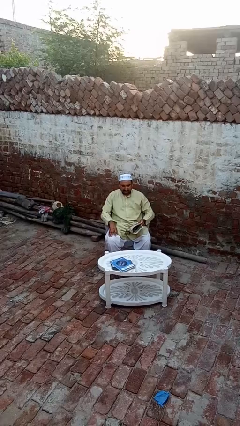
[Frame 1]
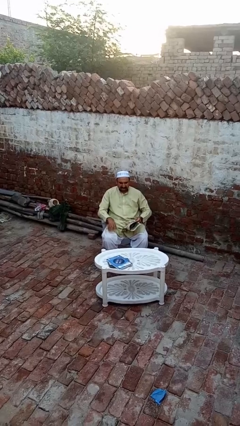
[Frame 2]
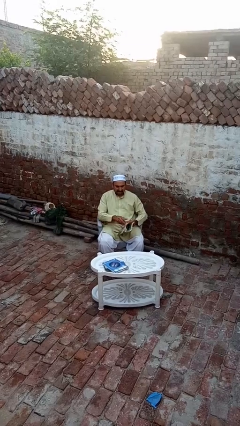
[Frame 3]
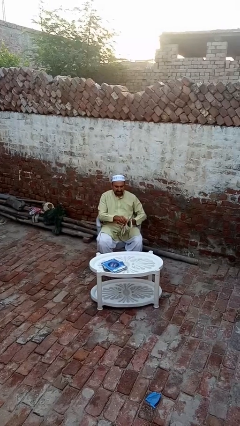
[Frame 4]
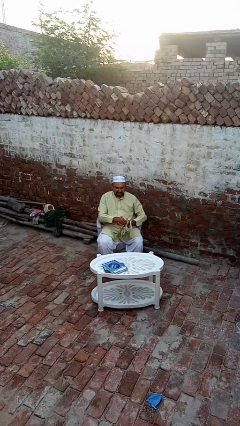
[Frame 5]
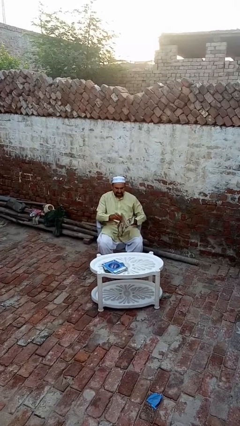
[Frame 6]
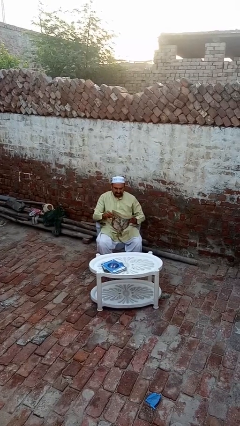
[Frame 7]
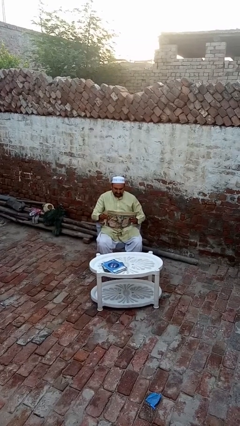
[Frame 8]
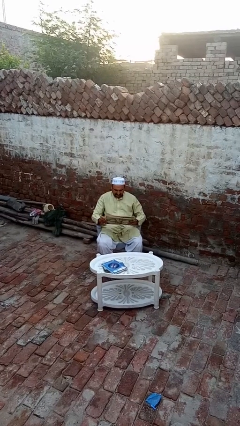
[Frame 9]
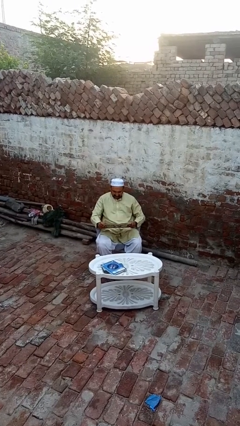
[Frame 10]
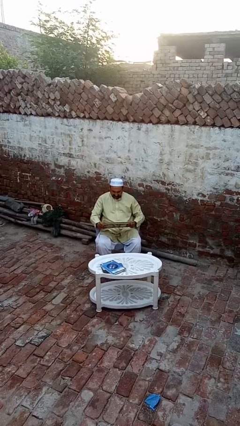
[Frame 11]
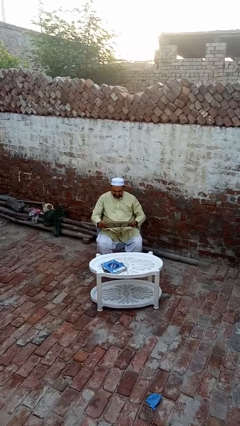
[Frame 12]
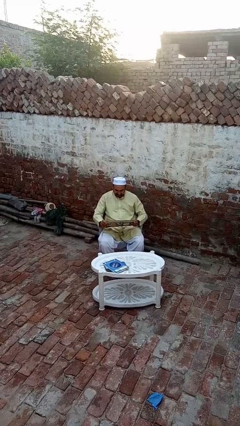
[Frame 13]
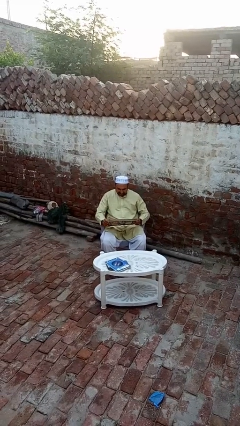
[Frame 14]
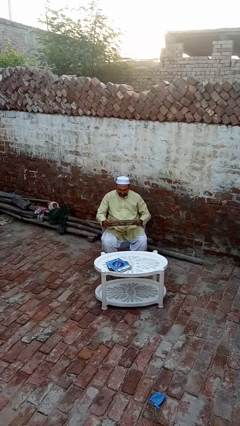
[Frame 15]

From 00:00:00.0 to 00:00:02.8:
person reads magazine

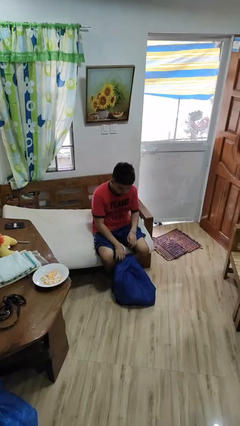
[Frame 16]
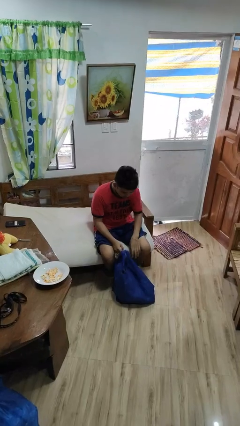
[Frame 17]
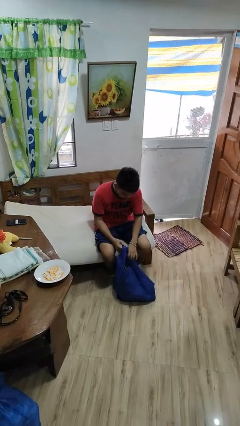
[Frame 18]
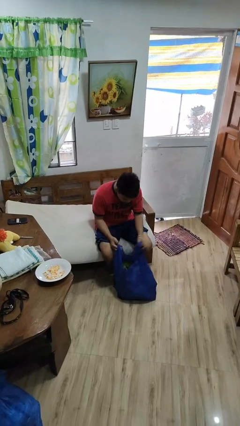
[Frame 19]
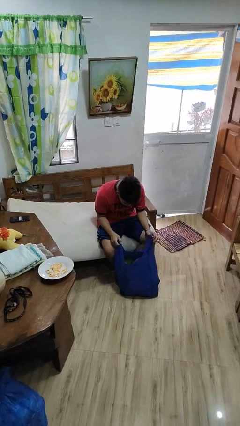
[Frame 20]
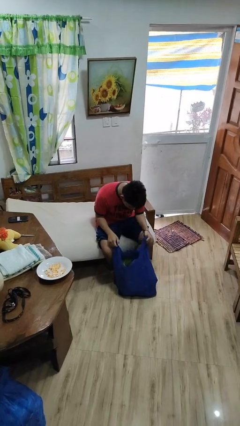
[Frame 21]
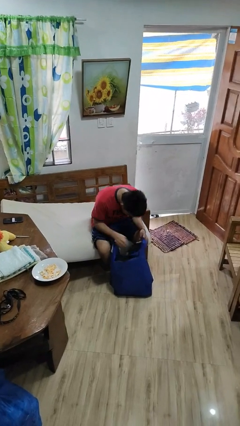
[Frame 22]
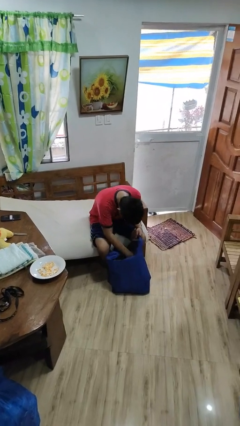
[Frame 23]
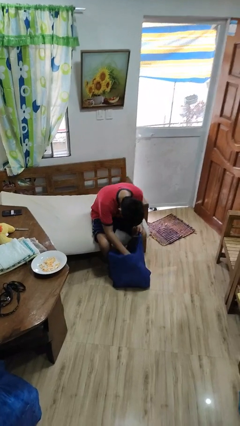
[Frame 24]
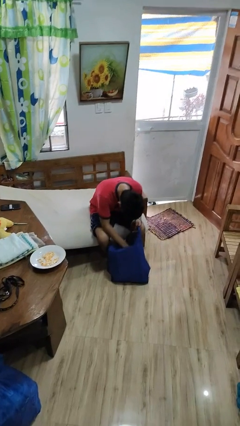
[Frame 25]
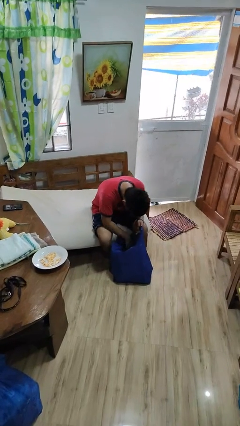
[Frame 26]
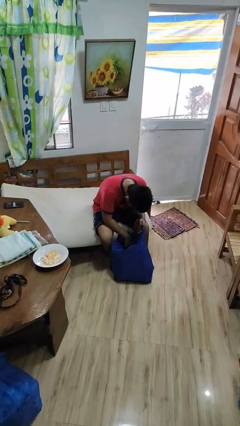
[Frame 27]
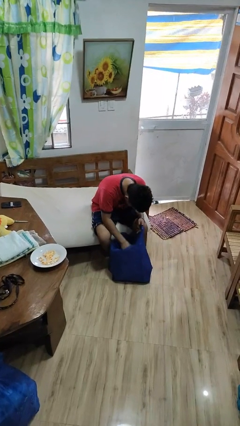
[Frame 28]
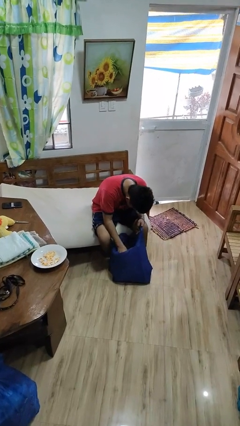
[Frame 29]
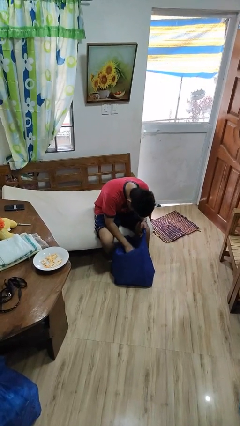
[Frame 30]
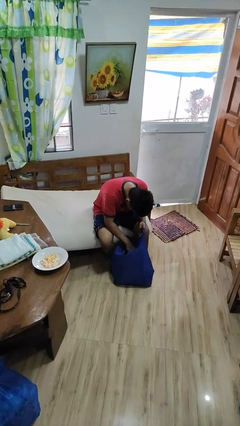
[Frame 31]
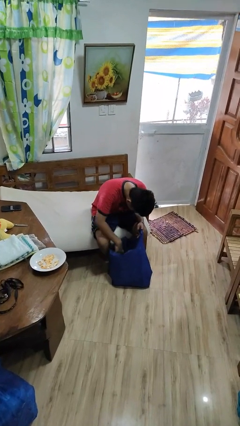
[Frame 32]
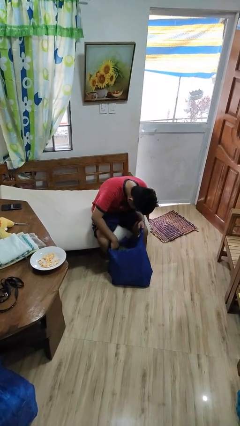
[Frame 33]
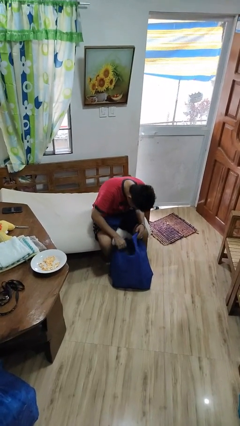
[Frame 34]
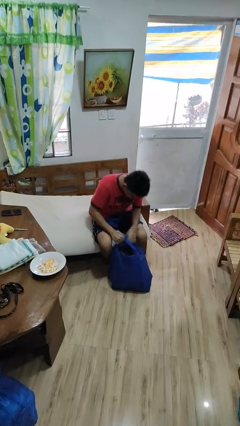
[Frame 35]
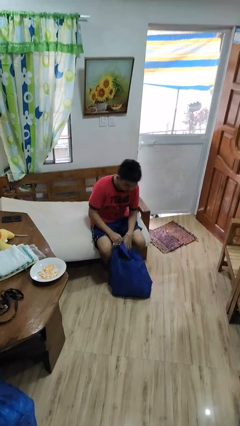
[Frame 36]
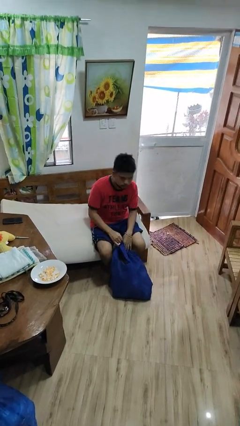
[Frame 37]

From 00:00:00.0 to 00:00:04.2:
person searches in bag

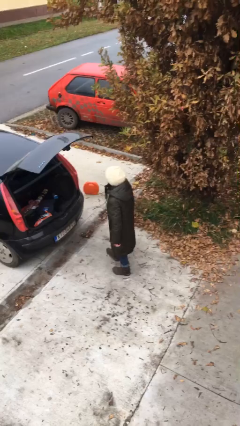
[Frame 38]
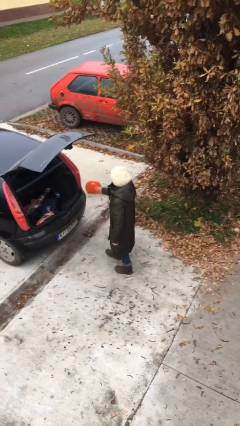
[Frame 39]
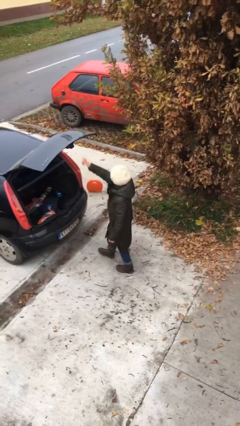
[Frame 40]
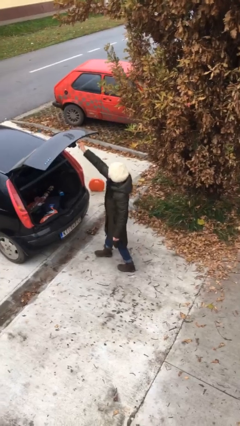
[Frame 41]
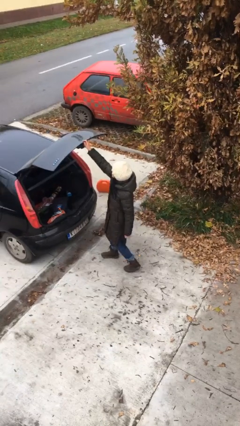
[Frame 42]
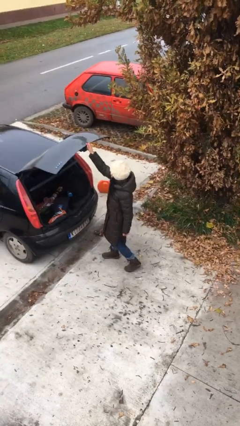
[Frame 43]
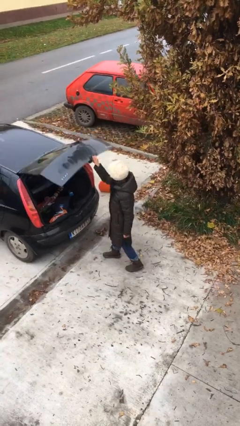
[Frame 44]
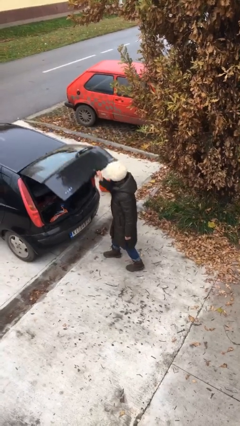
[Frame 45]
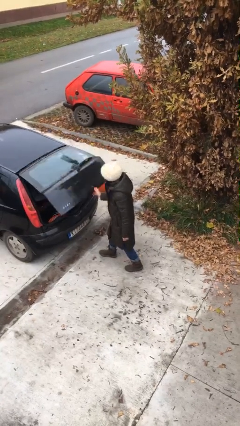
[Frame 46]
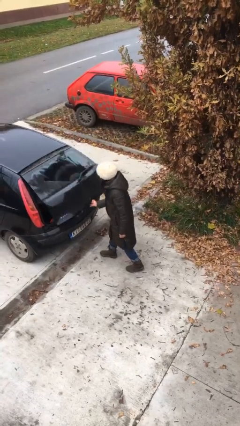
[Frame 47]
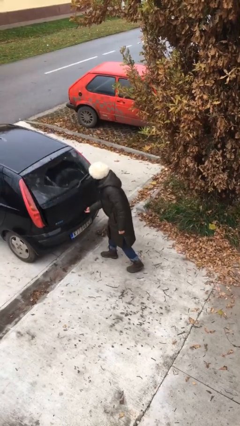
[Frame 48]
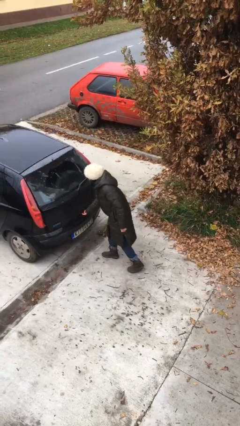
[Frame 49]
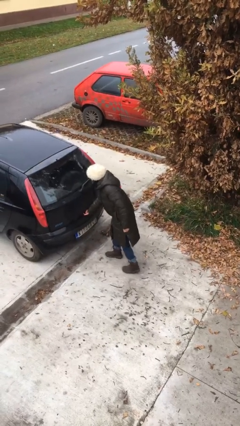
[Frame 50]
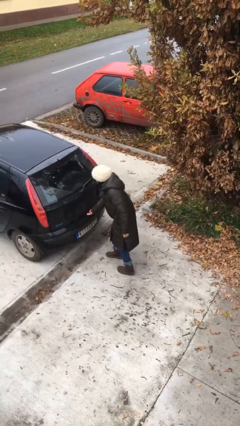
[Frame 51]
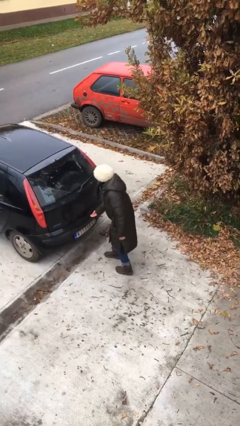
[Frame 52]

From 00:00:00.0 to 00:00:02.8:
person closes car trunk

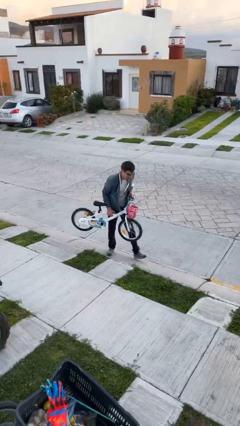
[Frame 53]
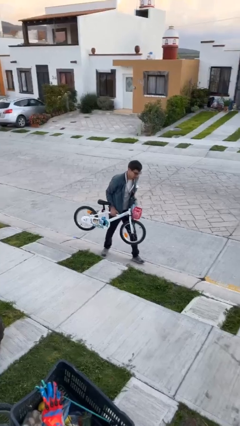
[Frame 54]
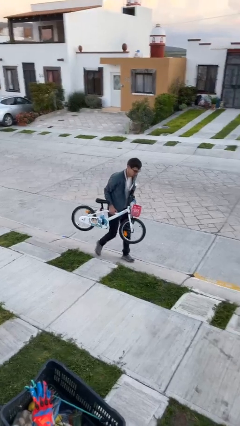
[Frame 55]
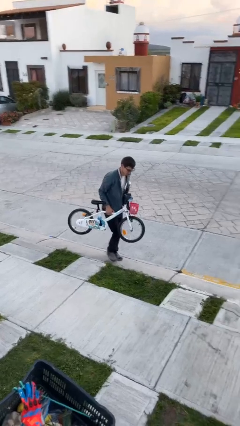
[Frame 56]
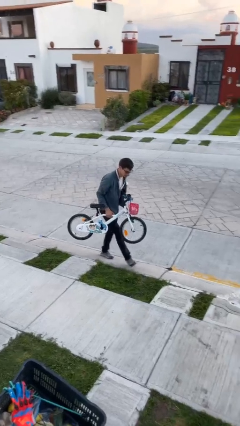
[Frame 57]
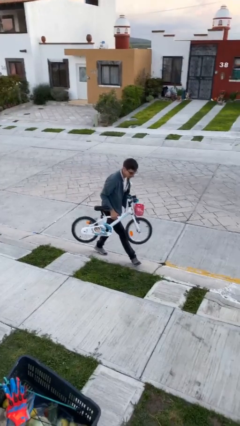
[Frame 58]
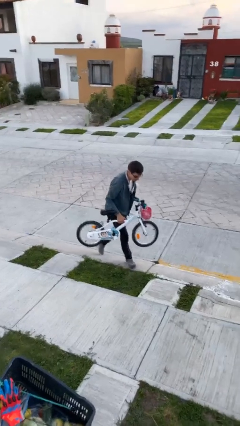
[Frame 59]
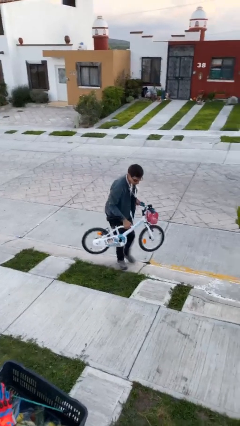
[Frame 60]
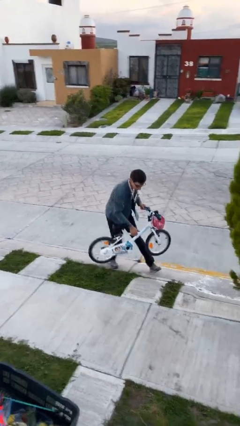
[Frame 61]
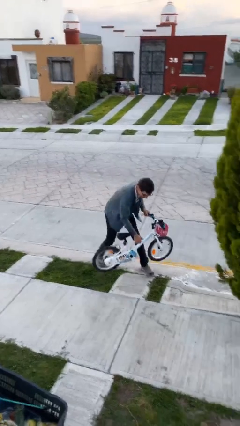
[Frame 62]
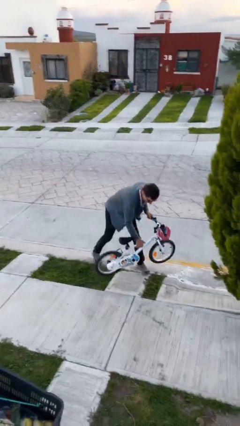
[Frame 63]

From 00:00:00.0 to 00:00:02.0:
person carries heavy object

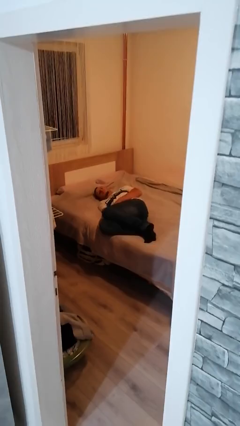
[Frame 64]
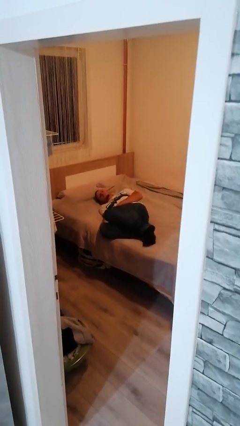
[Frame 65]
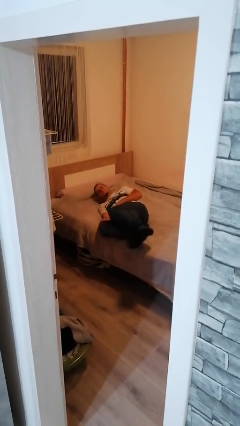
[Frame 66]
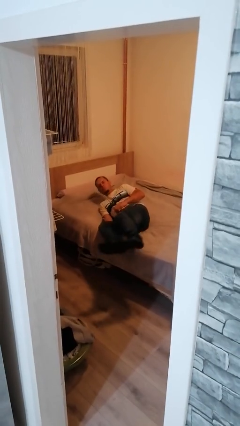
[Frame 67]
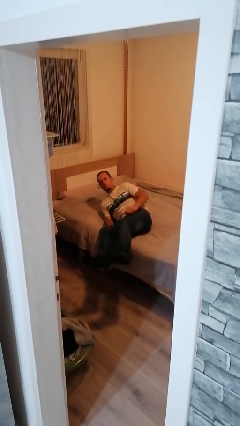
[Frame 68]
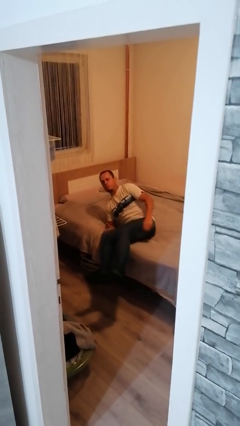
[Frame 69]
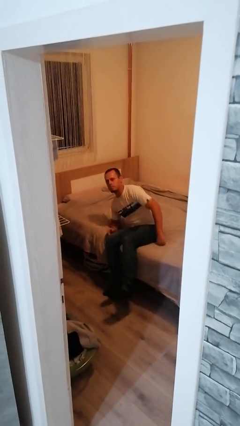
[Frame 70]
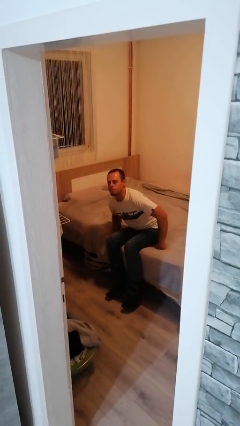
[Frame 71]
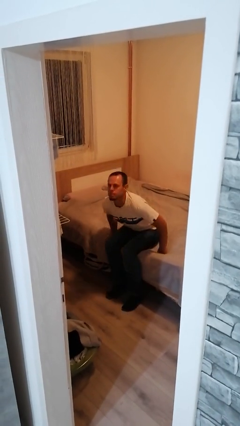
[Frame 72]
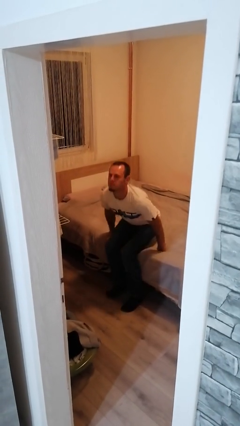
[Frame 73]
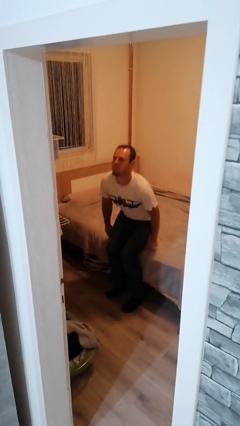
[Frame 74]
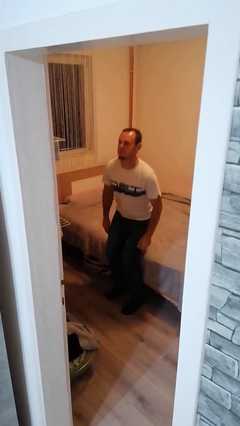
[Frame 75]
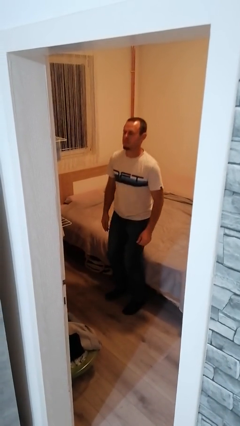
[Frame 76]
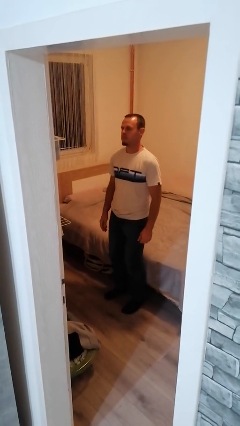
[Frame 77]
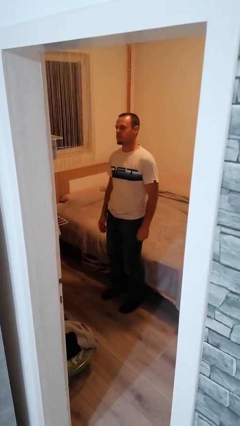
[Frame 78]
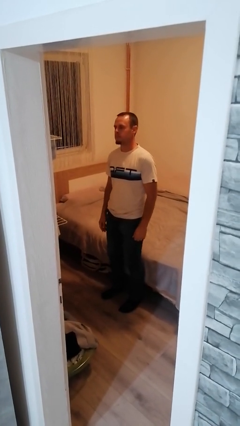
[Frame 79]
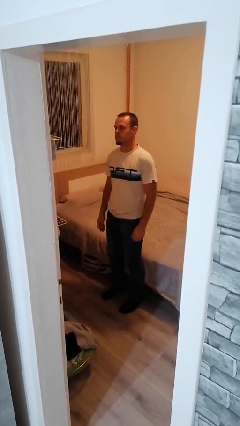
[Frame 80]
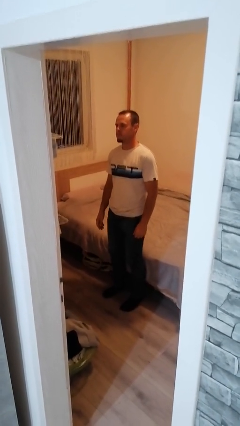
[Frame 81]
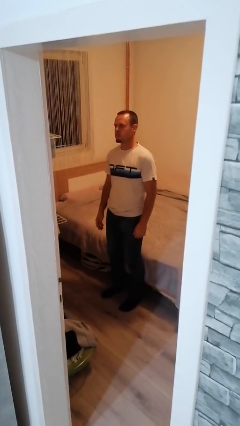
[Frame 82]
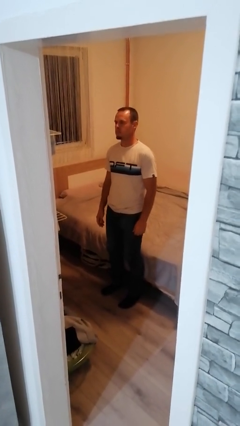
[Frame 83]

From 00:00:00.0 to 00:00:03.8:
person stands up

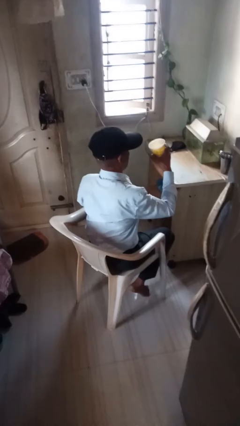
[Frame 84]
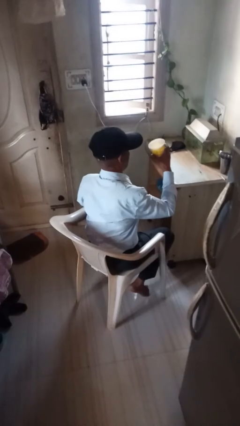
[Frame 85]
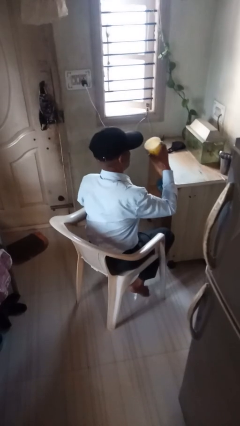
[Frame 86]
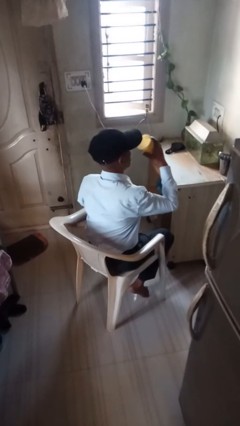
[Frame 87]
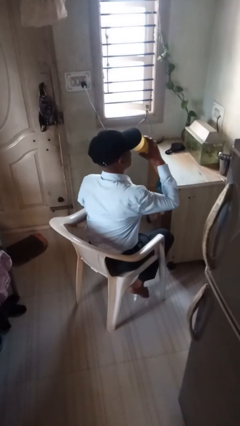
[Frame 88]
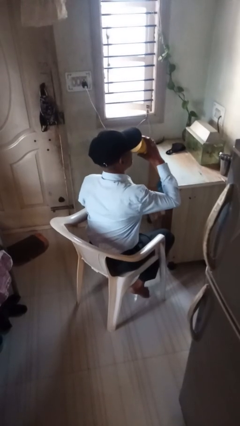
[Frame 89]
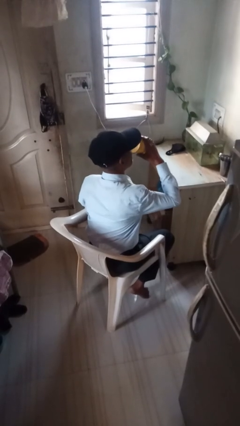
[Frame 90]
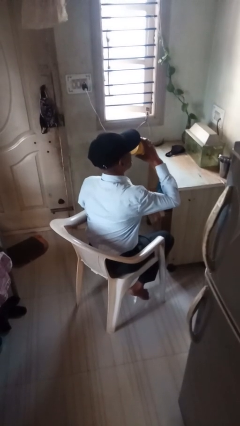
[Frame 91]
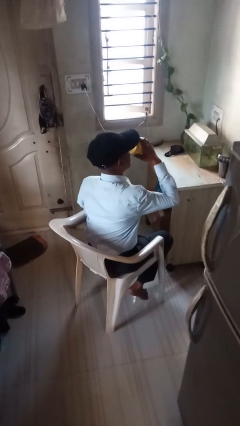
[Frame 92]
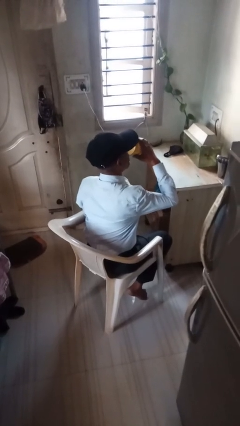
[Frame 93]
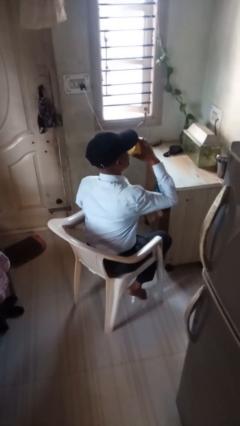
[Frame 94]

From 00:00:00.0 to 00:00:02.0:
person drinks from mug
